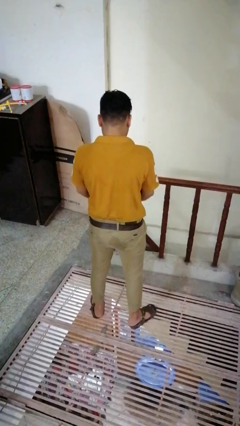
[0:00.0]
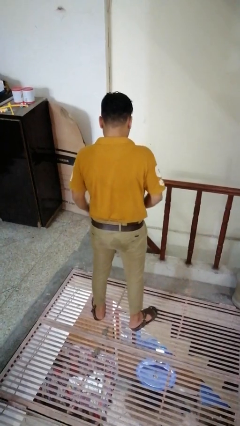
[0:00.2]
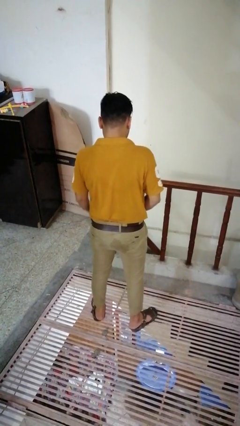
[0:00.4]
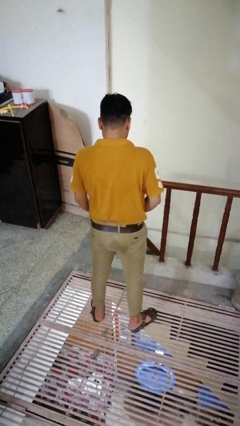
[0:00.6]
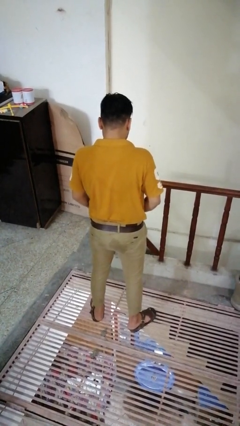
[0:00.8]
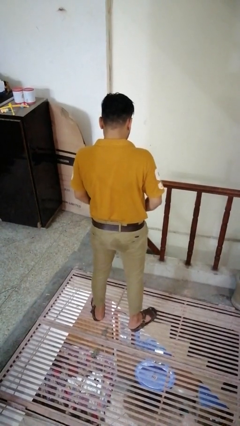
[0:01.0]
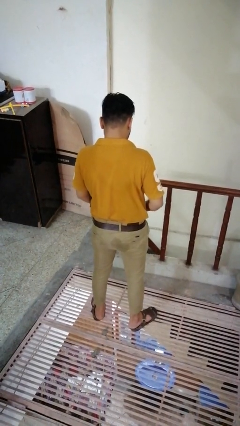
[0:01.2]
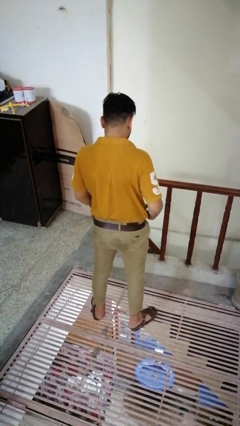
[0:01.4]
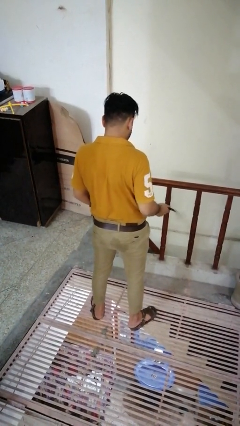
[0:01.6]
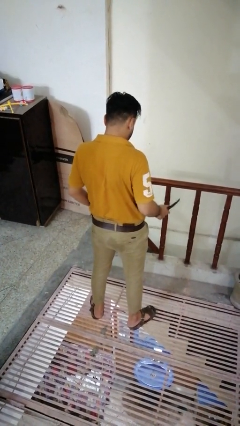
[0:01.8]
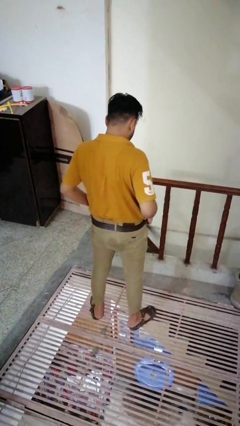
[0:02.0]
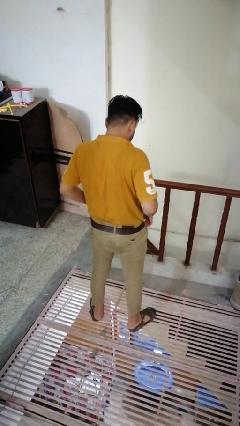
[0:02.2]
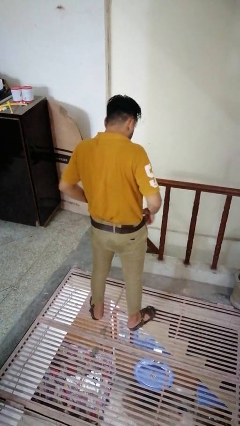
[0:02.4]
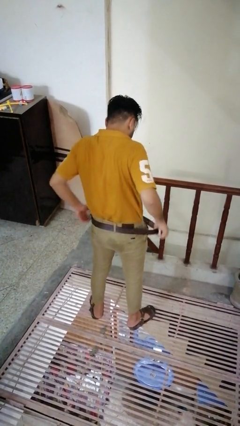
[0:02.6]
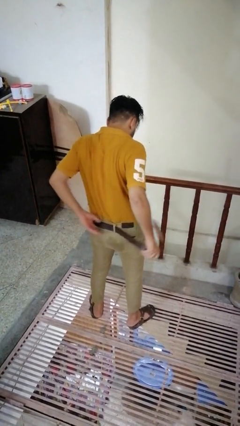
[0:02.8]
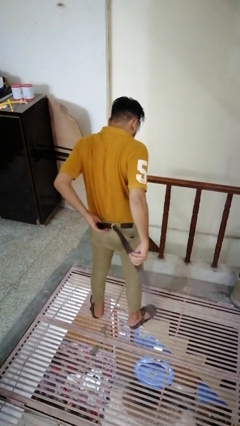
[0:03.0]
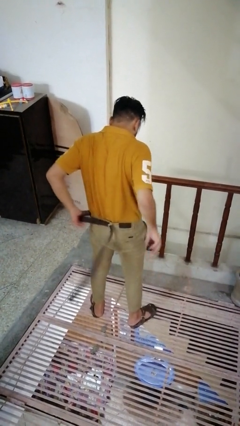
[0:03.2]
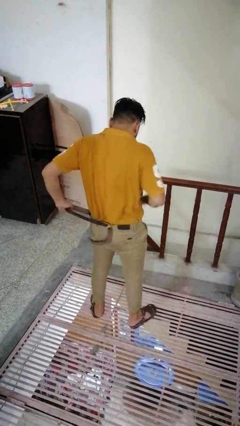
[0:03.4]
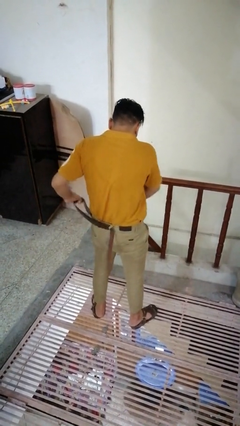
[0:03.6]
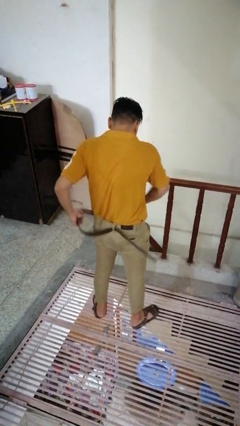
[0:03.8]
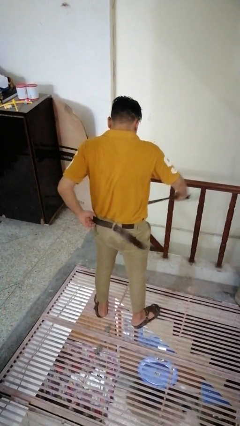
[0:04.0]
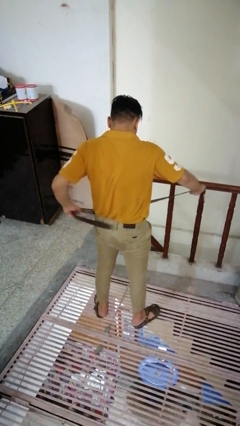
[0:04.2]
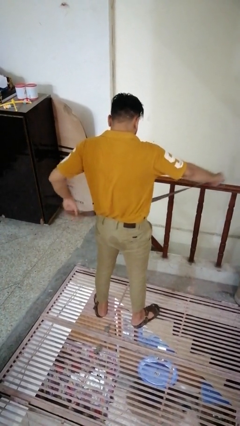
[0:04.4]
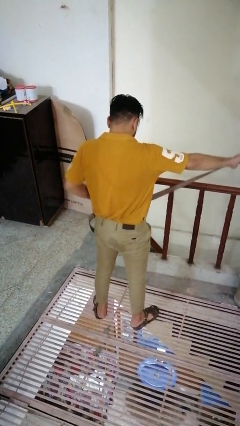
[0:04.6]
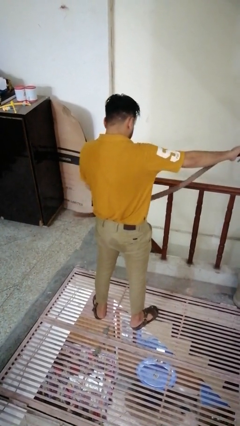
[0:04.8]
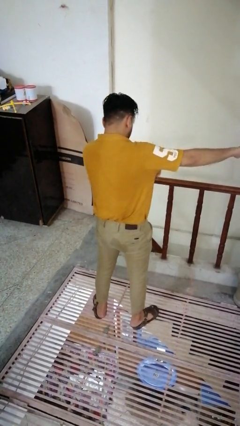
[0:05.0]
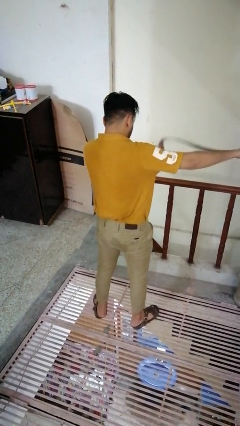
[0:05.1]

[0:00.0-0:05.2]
person takes off belt

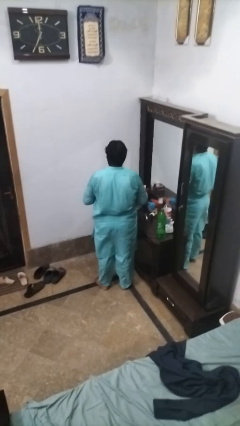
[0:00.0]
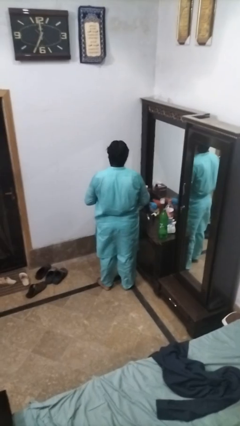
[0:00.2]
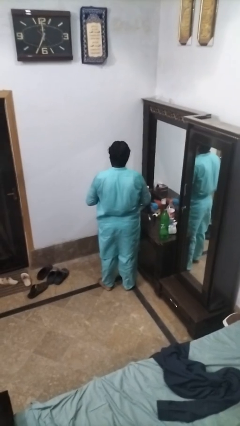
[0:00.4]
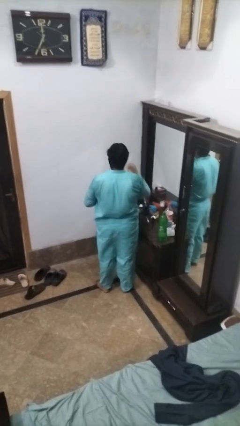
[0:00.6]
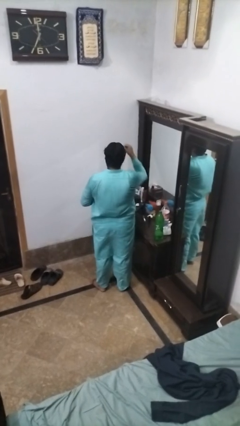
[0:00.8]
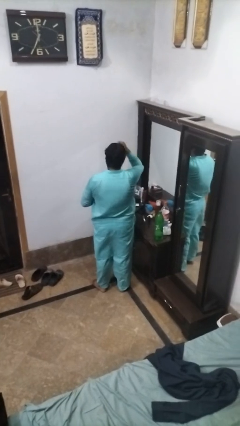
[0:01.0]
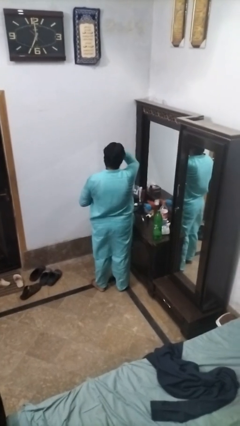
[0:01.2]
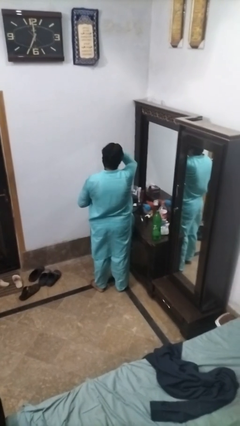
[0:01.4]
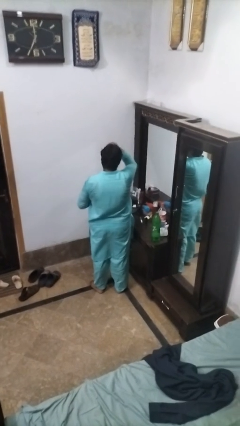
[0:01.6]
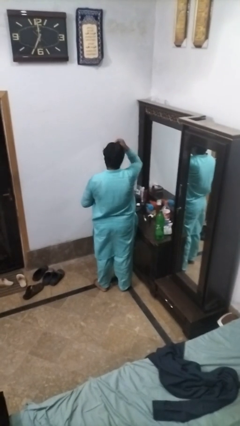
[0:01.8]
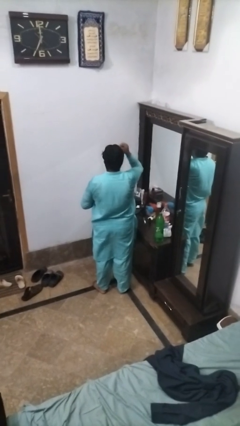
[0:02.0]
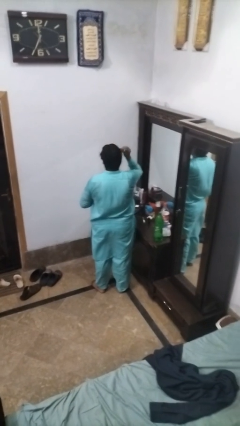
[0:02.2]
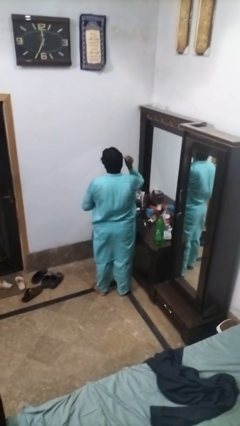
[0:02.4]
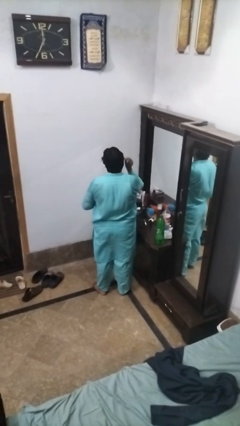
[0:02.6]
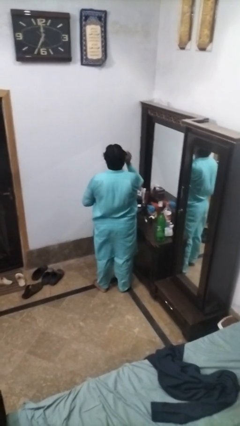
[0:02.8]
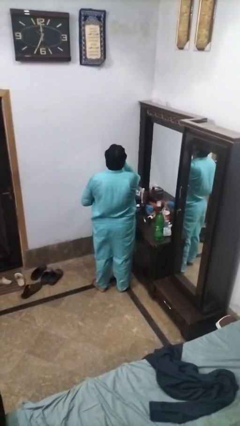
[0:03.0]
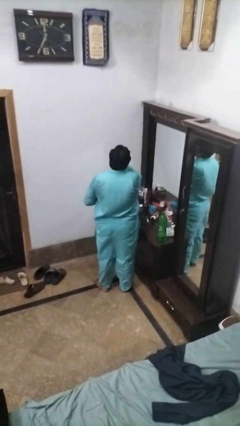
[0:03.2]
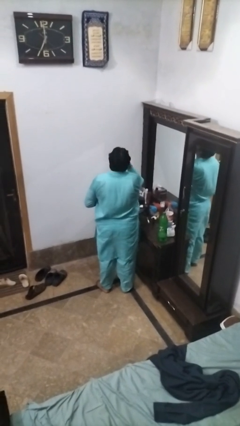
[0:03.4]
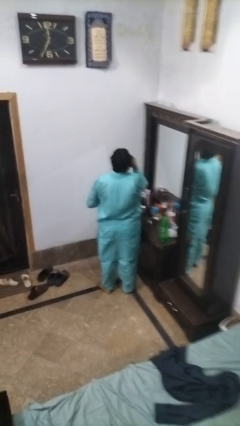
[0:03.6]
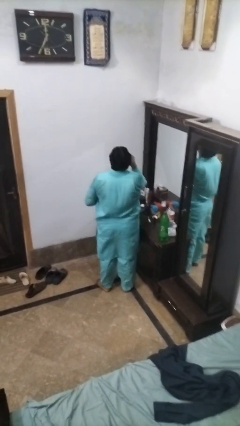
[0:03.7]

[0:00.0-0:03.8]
person applies foundation makeup

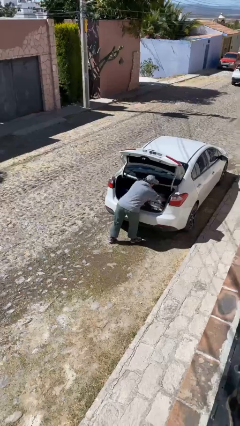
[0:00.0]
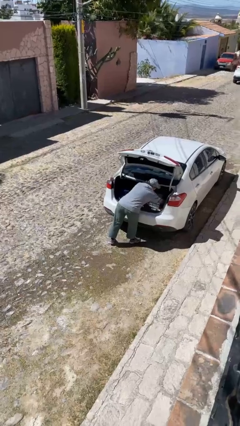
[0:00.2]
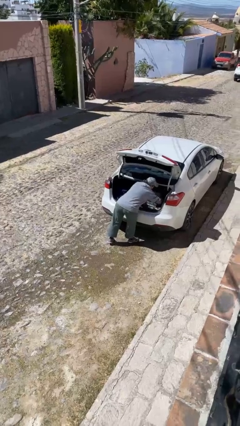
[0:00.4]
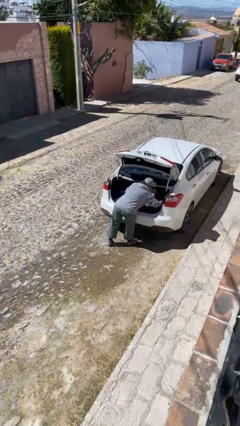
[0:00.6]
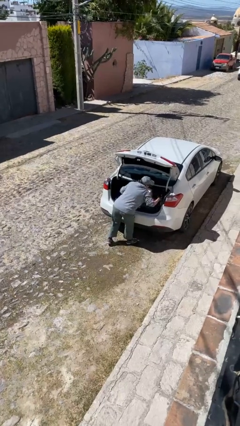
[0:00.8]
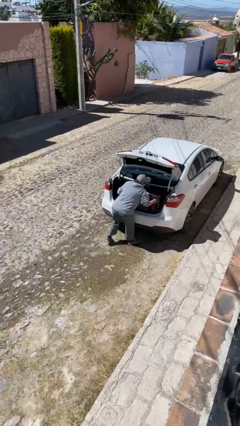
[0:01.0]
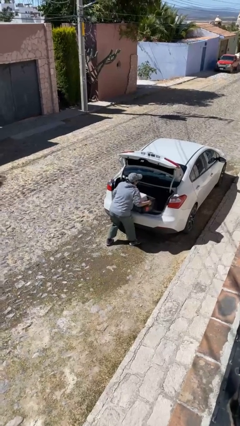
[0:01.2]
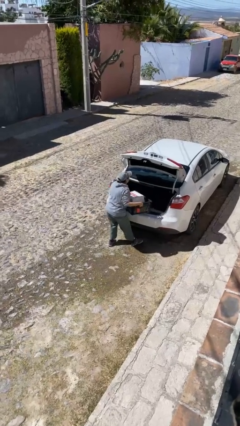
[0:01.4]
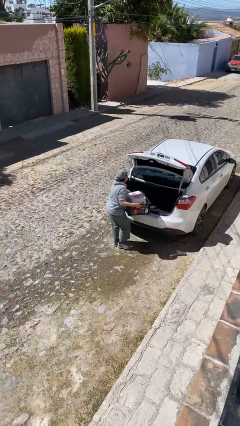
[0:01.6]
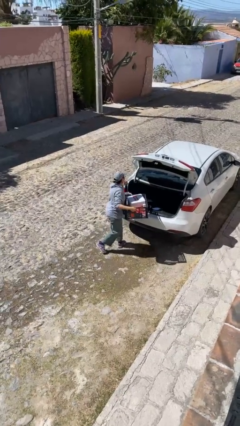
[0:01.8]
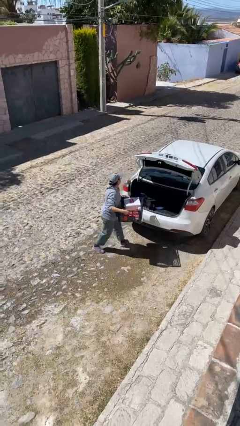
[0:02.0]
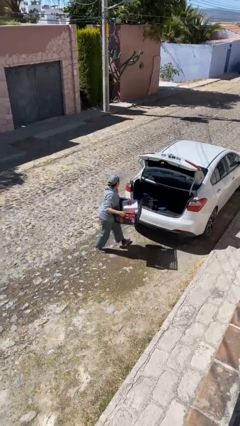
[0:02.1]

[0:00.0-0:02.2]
person unloads car

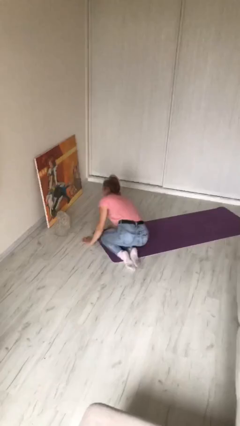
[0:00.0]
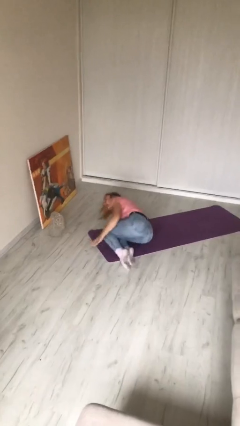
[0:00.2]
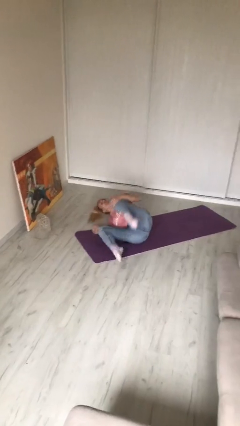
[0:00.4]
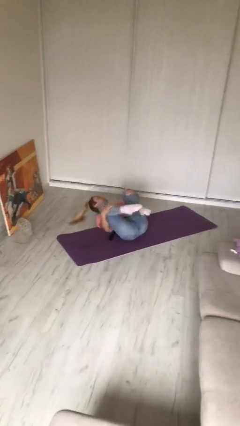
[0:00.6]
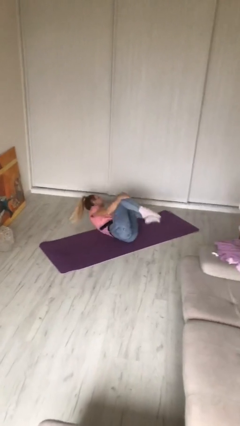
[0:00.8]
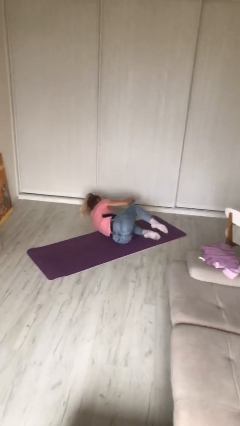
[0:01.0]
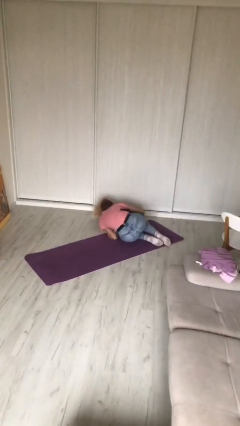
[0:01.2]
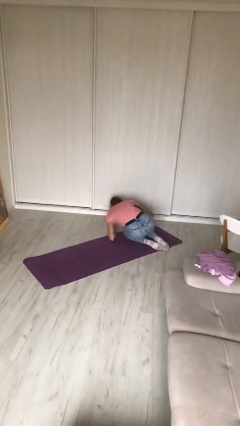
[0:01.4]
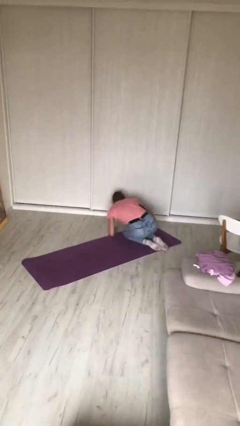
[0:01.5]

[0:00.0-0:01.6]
person somersaults

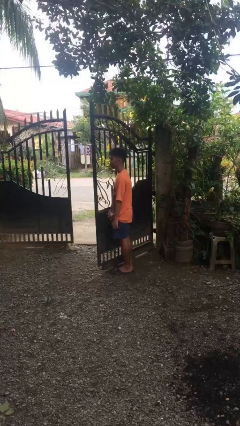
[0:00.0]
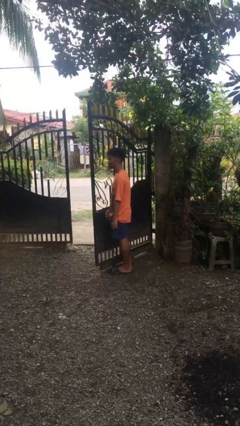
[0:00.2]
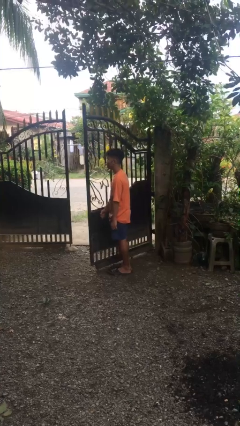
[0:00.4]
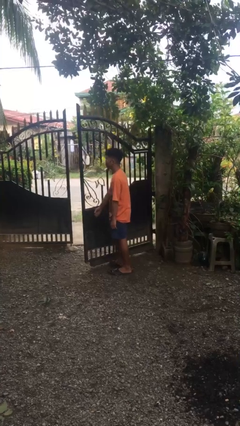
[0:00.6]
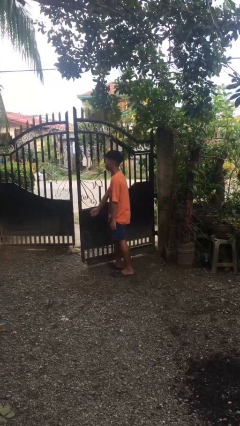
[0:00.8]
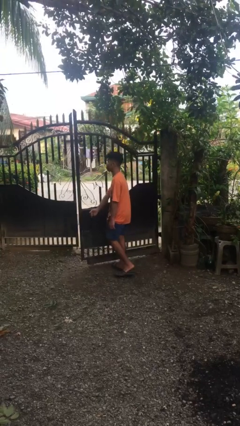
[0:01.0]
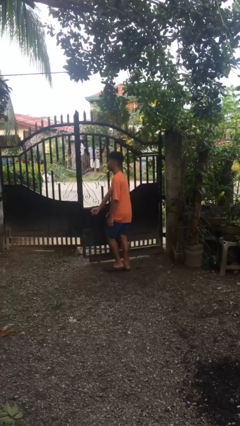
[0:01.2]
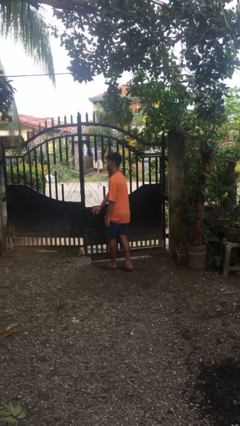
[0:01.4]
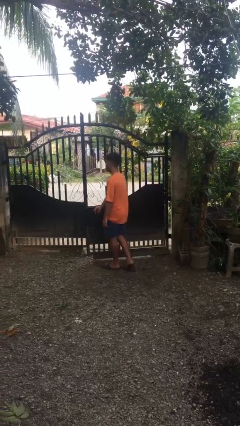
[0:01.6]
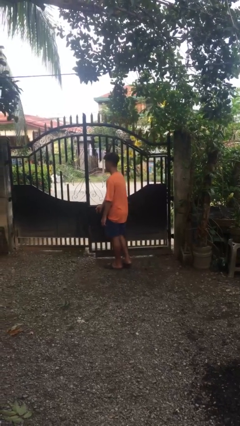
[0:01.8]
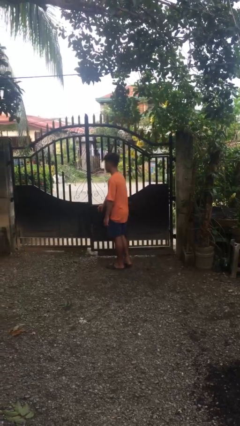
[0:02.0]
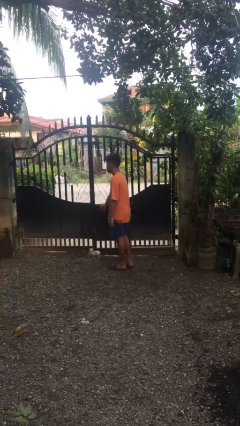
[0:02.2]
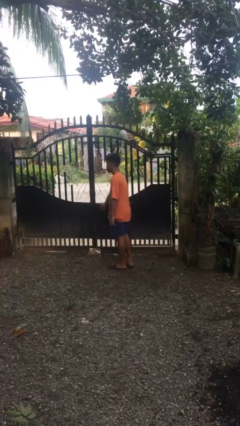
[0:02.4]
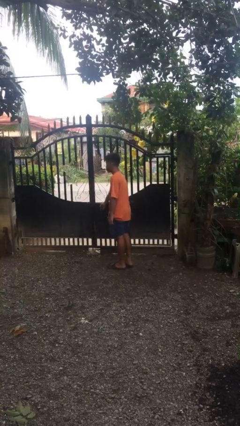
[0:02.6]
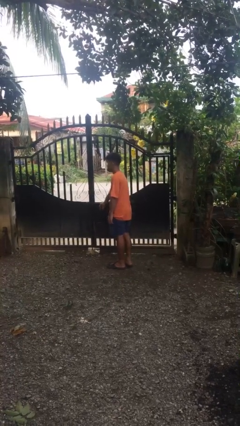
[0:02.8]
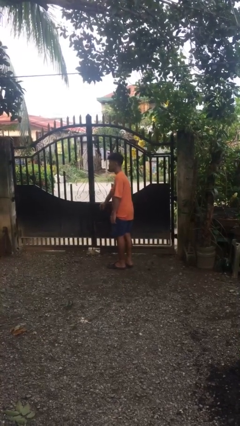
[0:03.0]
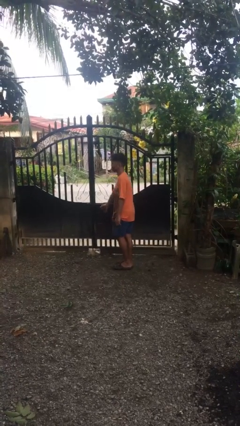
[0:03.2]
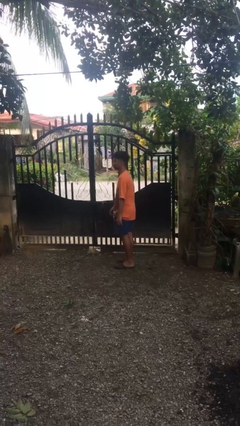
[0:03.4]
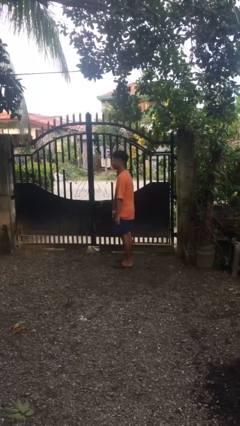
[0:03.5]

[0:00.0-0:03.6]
person closes gate

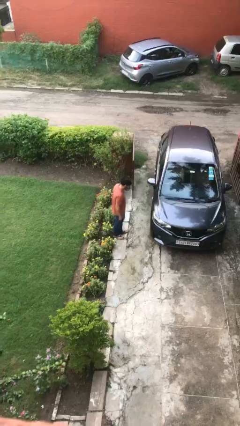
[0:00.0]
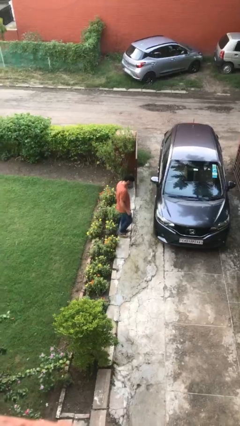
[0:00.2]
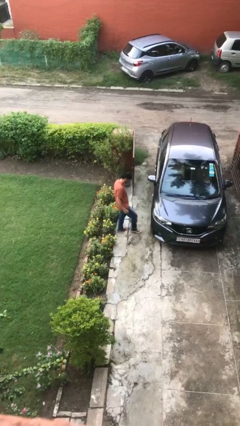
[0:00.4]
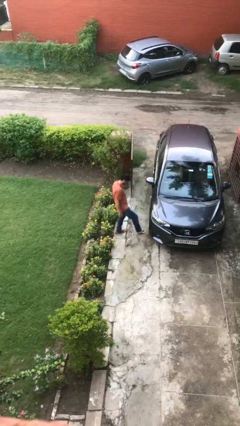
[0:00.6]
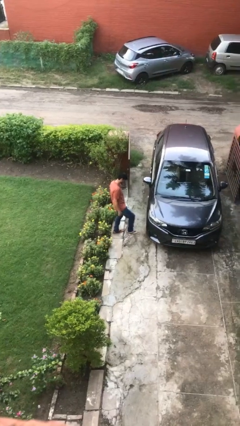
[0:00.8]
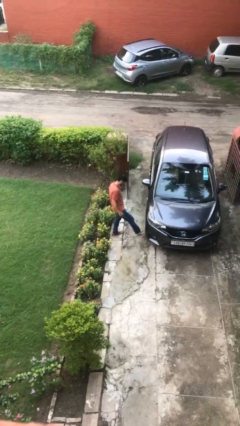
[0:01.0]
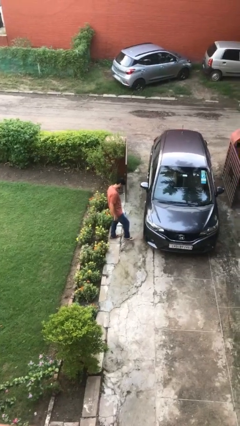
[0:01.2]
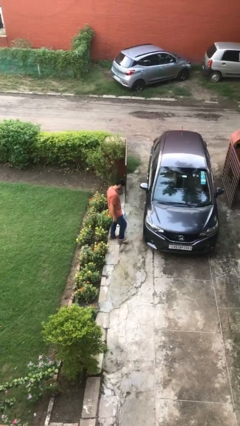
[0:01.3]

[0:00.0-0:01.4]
person kicks car tires
